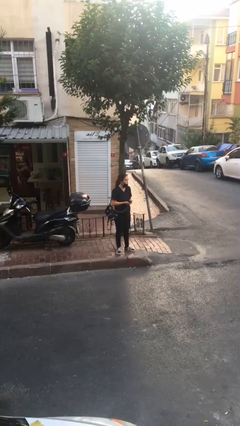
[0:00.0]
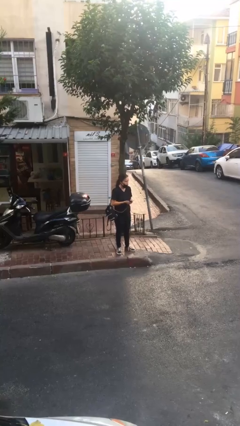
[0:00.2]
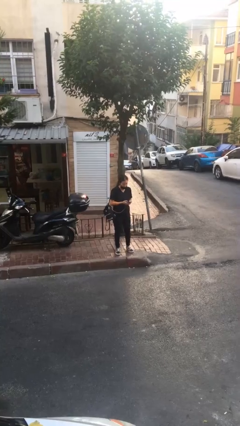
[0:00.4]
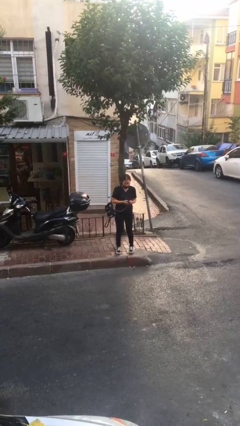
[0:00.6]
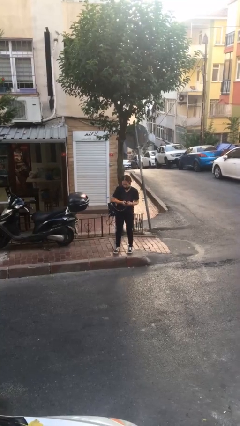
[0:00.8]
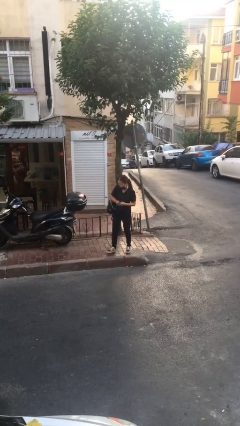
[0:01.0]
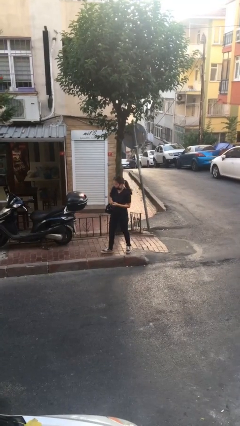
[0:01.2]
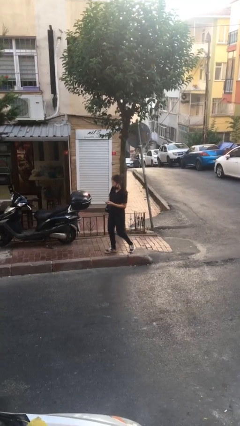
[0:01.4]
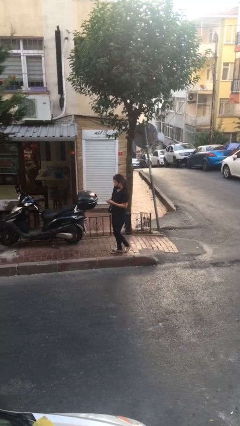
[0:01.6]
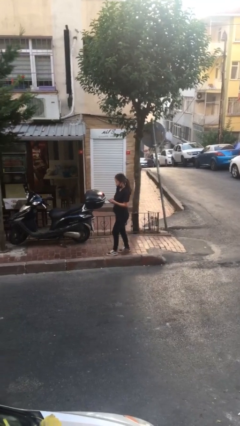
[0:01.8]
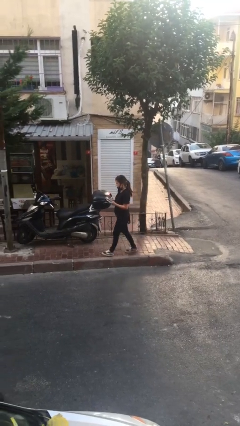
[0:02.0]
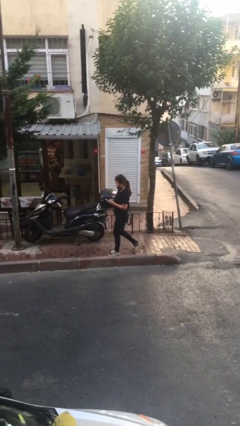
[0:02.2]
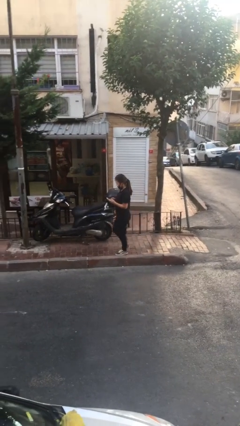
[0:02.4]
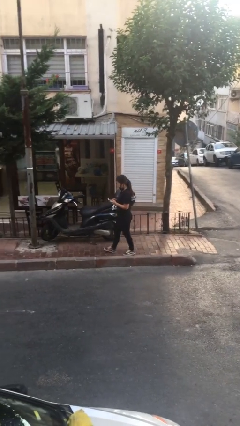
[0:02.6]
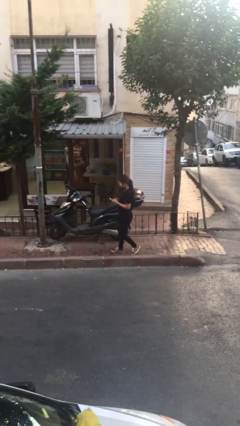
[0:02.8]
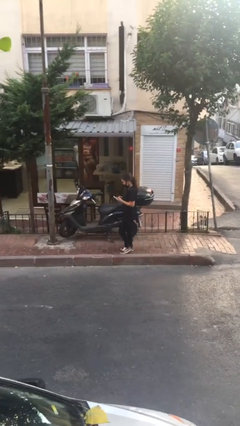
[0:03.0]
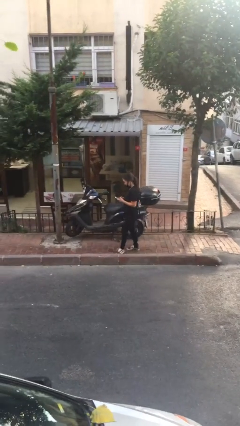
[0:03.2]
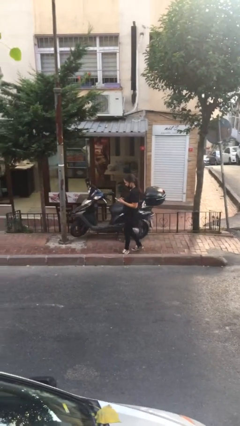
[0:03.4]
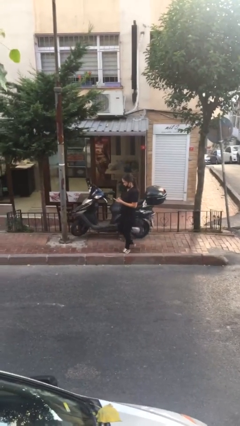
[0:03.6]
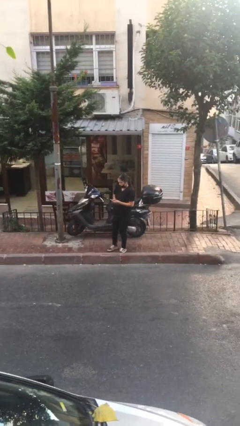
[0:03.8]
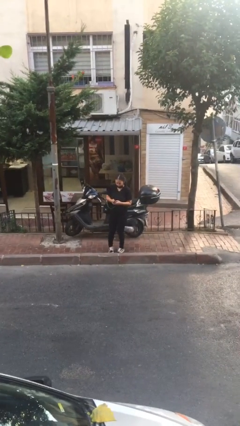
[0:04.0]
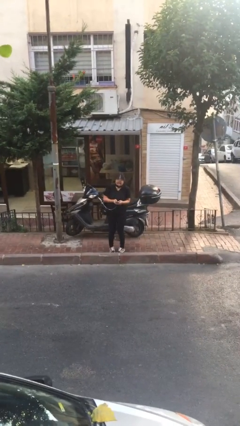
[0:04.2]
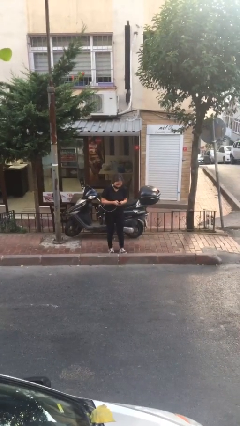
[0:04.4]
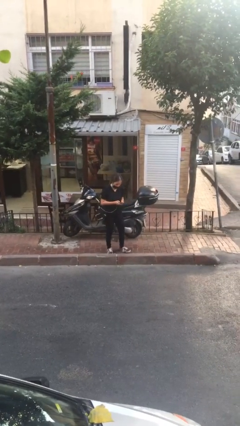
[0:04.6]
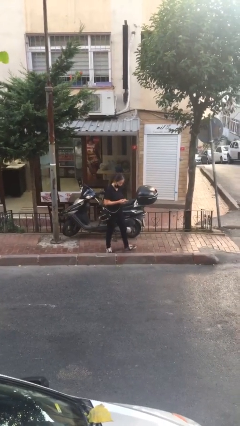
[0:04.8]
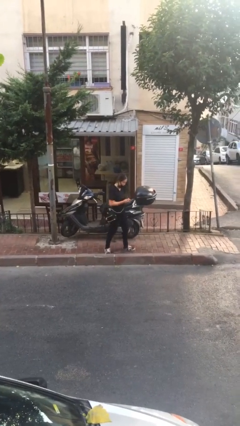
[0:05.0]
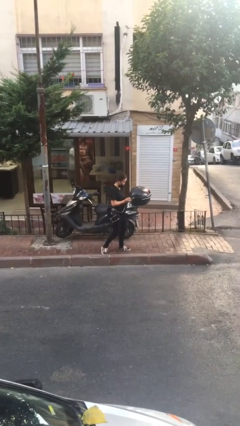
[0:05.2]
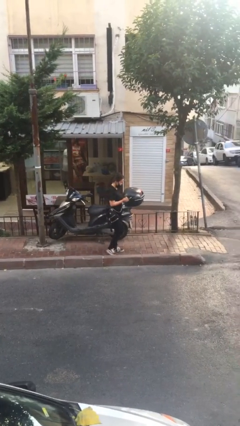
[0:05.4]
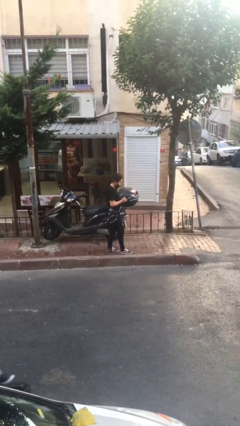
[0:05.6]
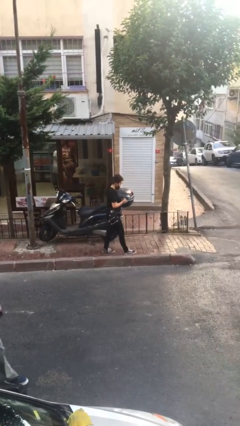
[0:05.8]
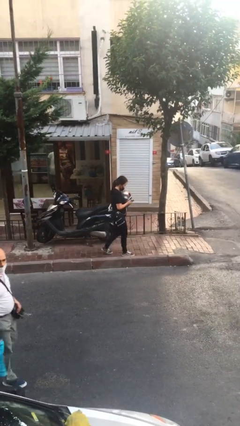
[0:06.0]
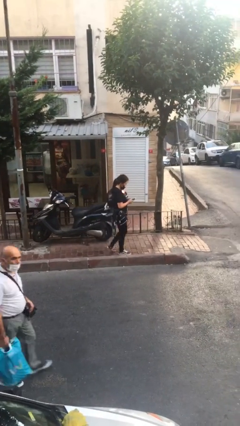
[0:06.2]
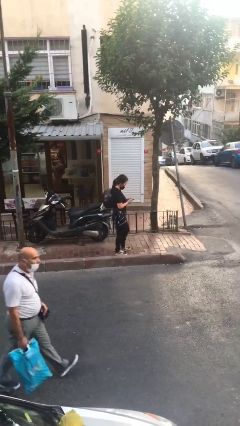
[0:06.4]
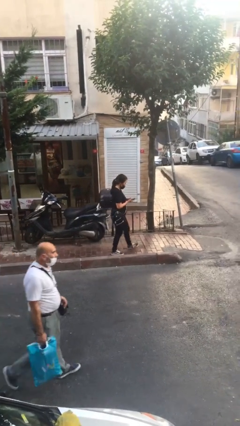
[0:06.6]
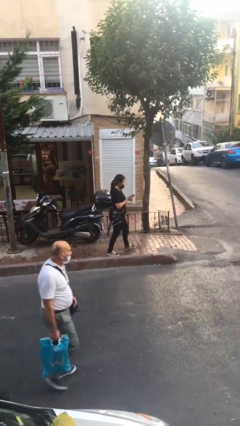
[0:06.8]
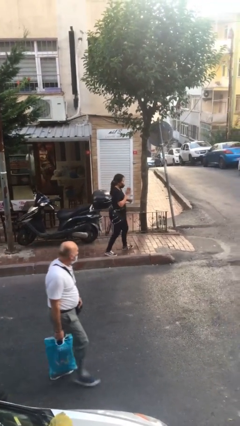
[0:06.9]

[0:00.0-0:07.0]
person texts on phone

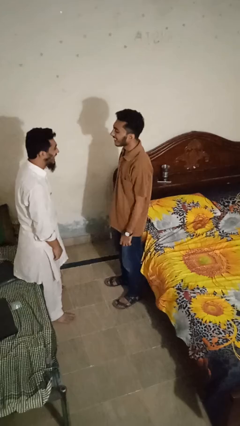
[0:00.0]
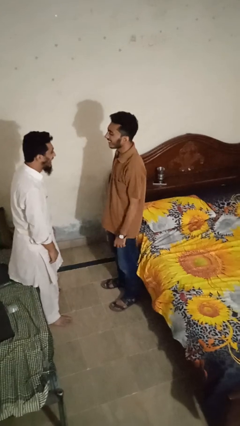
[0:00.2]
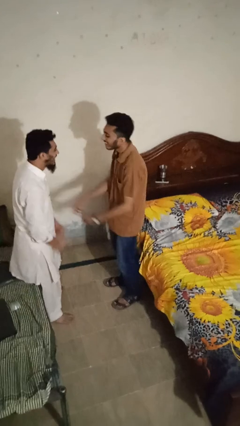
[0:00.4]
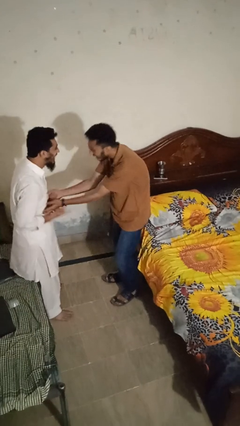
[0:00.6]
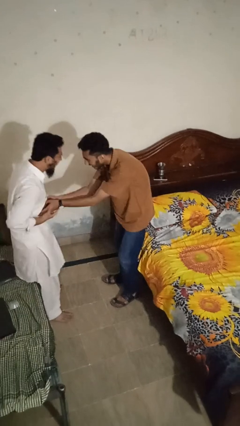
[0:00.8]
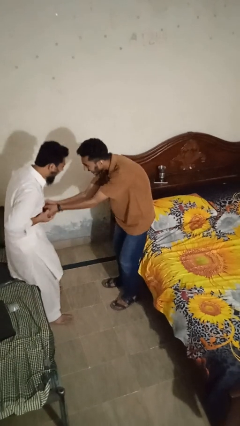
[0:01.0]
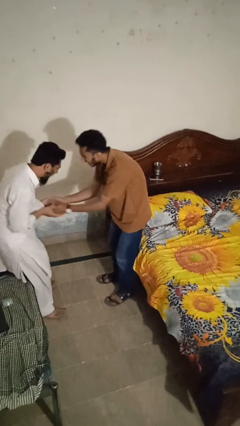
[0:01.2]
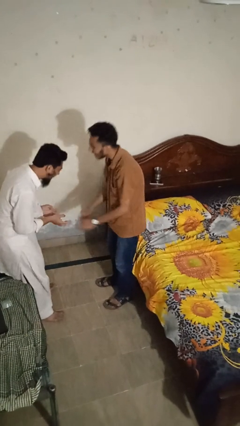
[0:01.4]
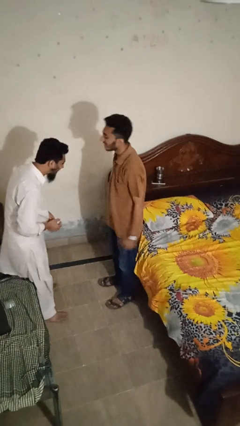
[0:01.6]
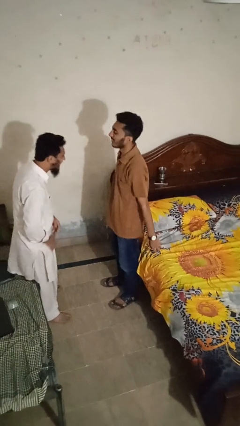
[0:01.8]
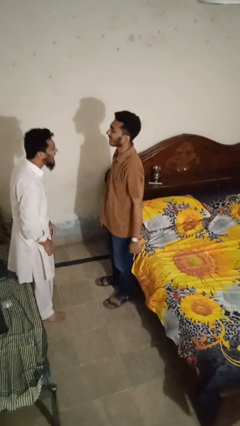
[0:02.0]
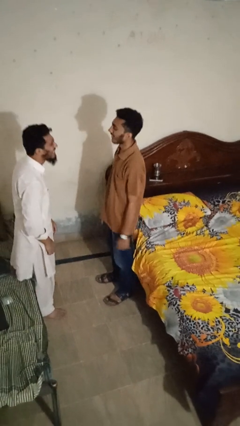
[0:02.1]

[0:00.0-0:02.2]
person tickles person

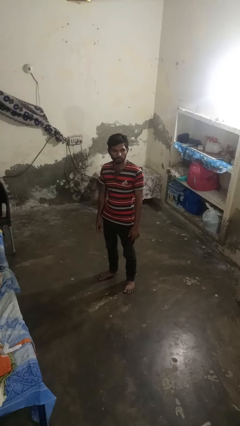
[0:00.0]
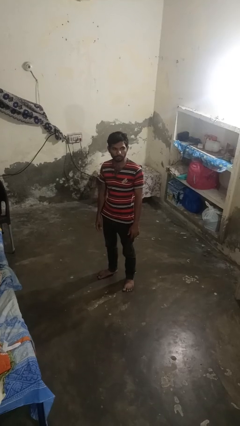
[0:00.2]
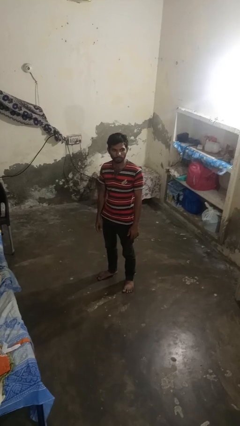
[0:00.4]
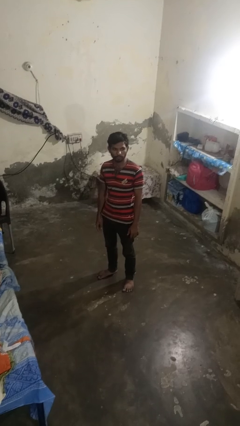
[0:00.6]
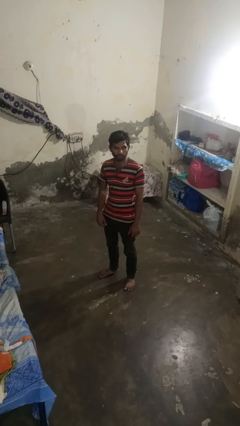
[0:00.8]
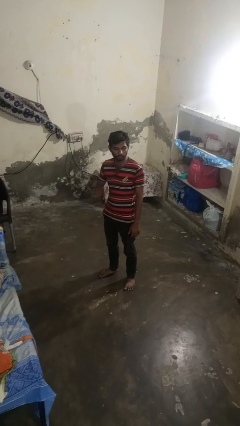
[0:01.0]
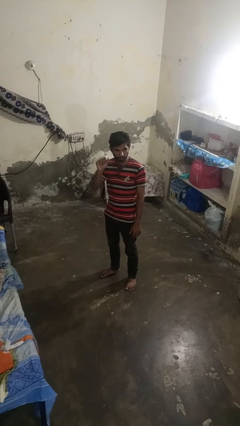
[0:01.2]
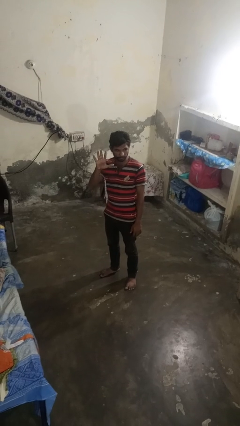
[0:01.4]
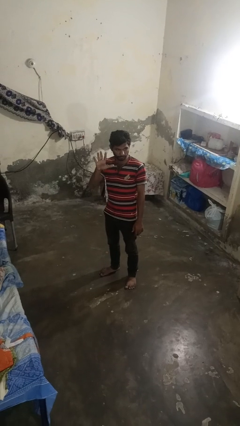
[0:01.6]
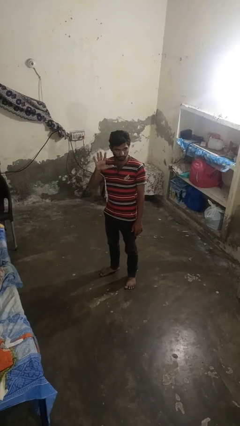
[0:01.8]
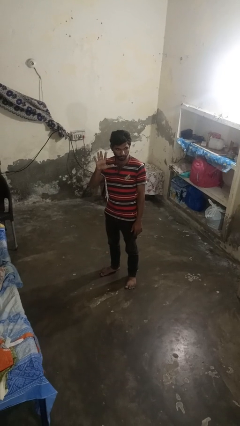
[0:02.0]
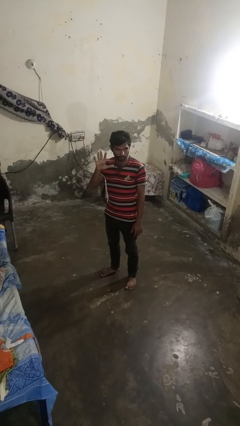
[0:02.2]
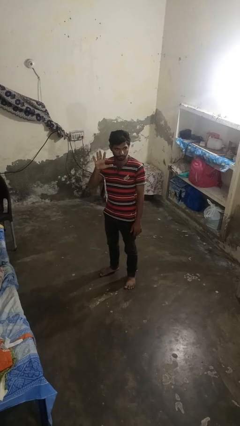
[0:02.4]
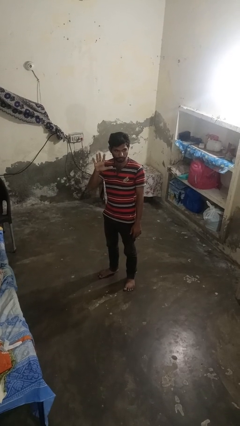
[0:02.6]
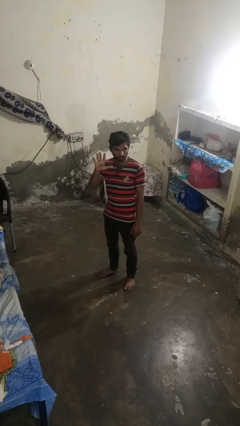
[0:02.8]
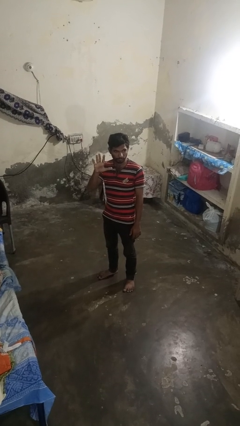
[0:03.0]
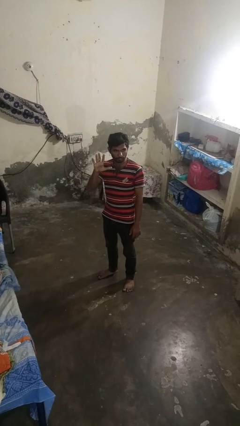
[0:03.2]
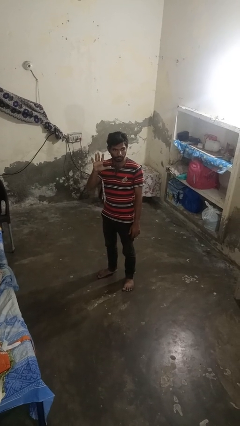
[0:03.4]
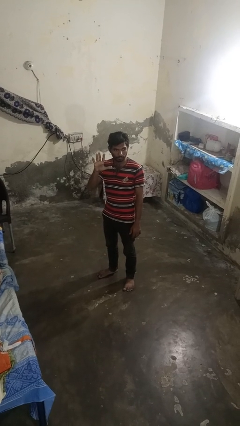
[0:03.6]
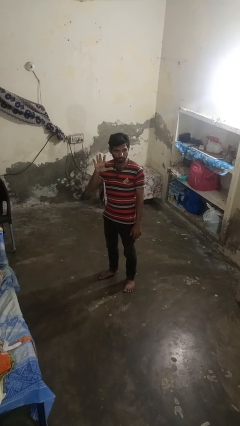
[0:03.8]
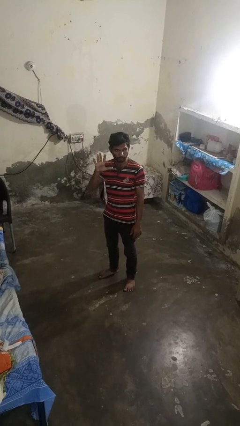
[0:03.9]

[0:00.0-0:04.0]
person gestures number five

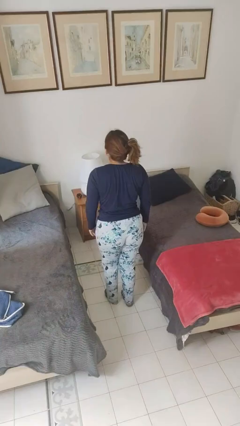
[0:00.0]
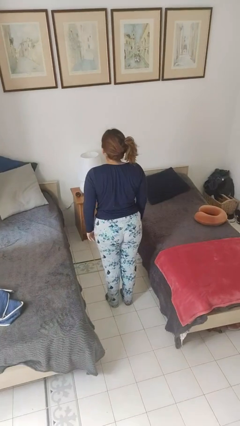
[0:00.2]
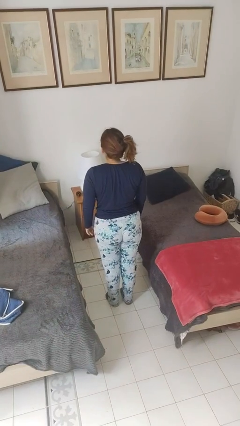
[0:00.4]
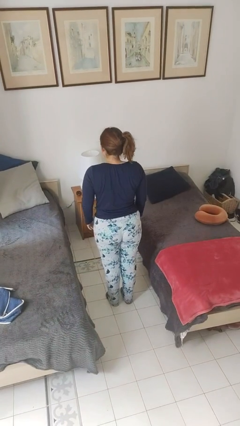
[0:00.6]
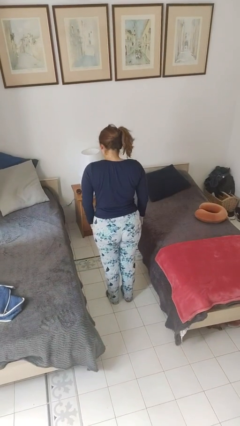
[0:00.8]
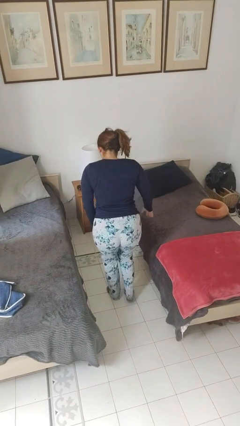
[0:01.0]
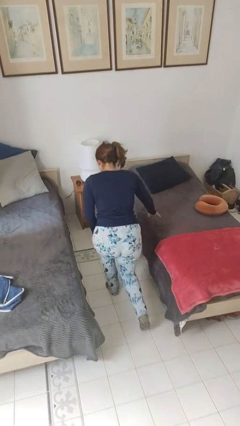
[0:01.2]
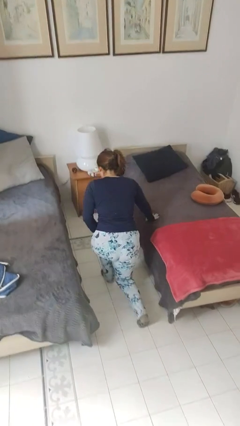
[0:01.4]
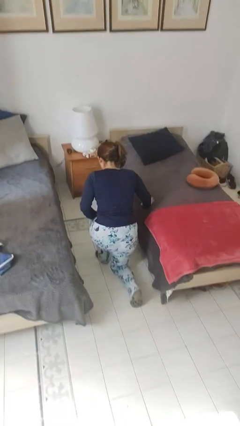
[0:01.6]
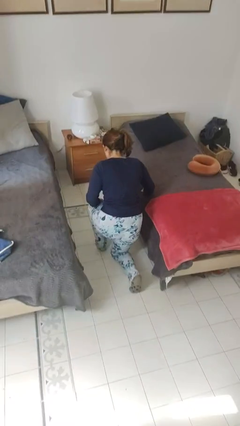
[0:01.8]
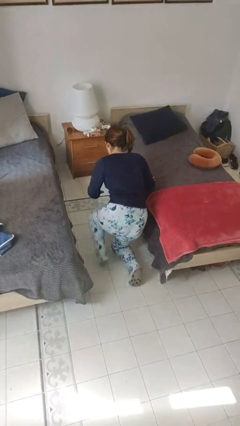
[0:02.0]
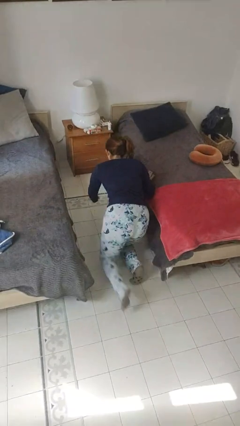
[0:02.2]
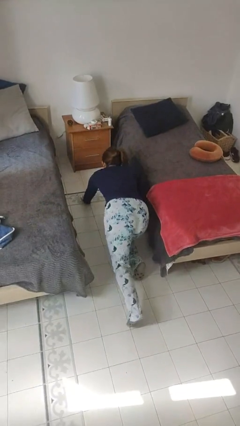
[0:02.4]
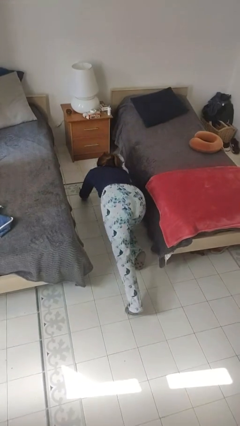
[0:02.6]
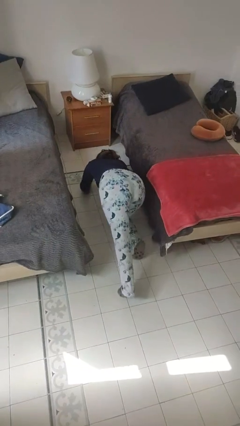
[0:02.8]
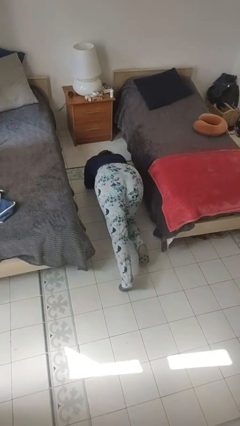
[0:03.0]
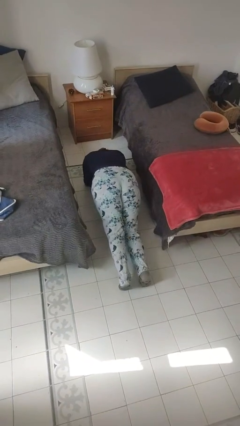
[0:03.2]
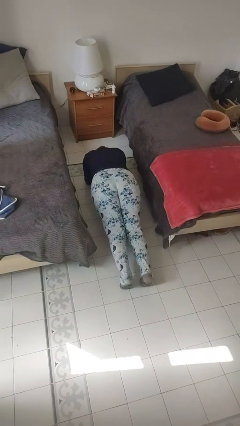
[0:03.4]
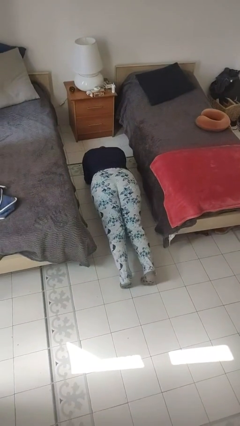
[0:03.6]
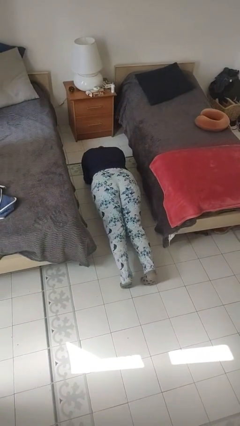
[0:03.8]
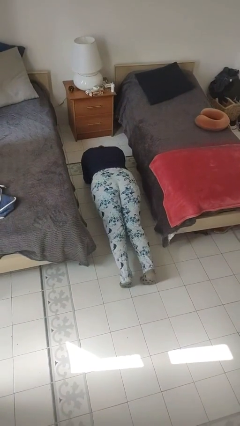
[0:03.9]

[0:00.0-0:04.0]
person exercises with plank

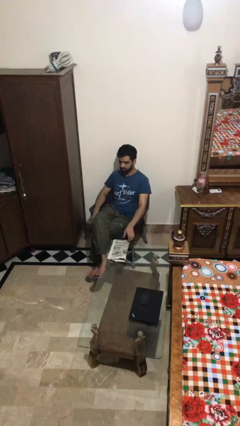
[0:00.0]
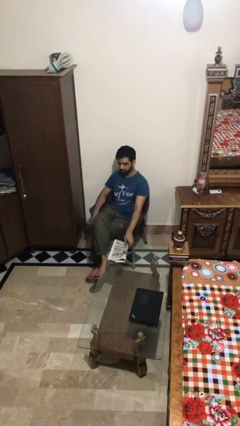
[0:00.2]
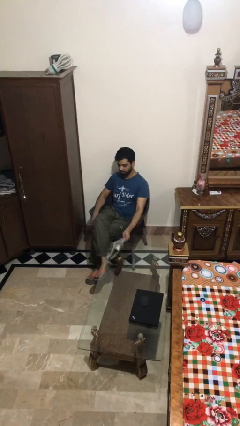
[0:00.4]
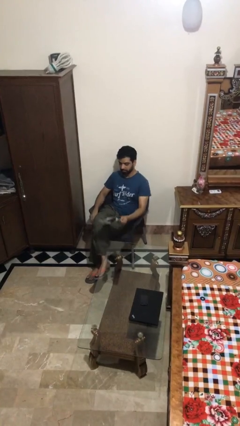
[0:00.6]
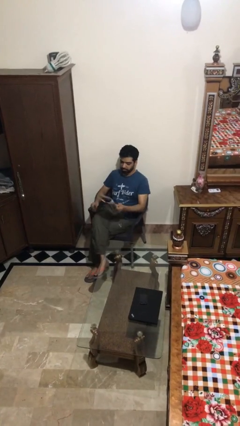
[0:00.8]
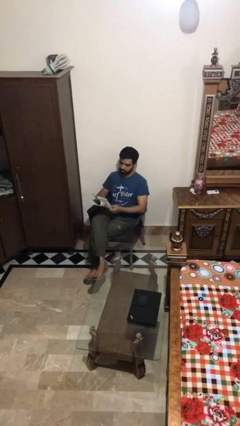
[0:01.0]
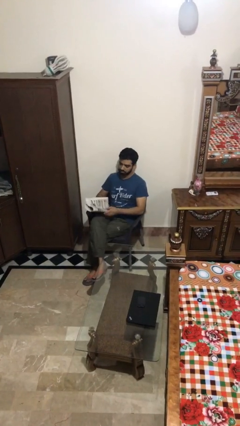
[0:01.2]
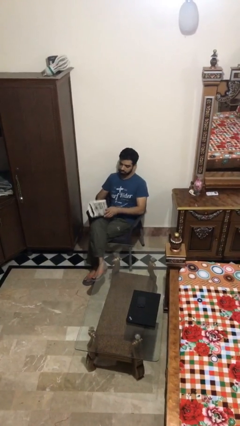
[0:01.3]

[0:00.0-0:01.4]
person picks up object from table
